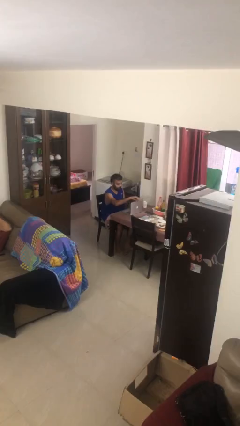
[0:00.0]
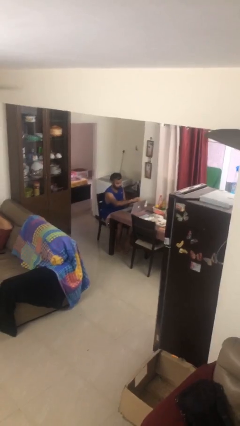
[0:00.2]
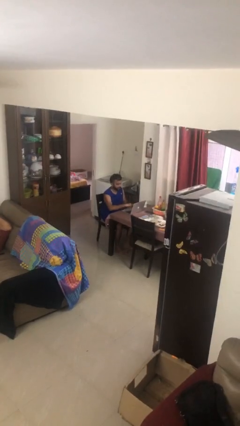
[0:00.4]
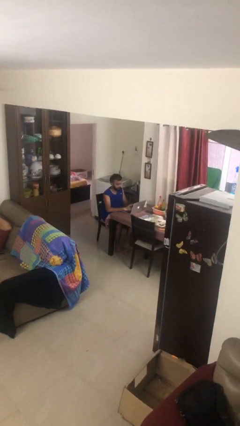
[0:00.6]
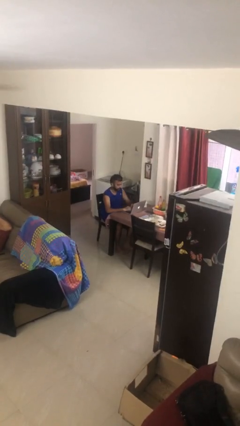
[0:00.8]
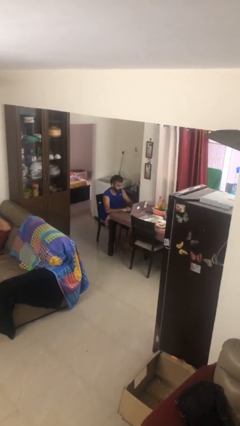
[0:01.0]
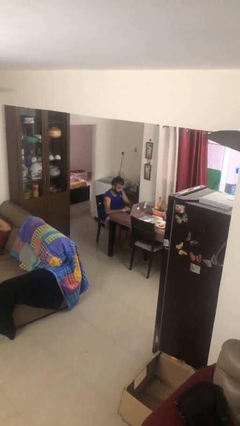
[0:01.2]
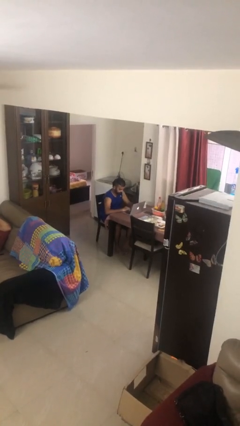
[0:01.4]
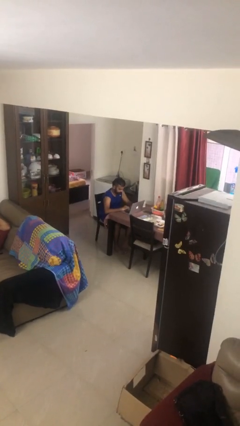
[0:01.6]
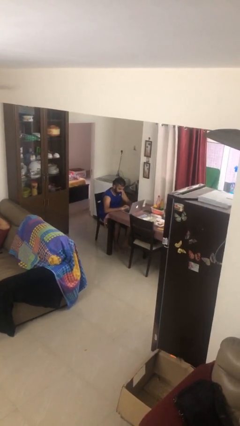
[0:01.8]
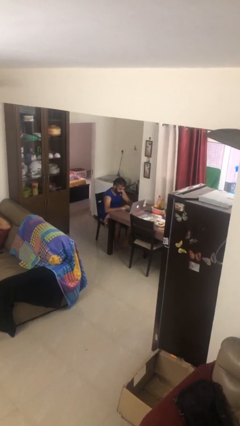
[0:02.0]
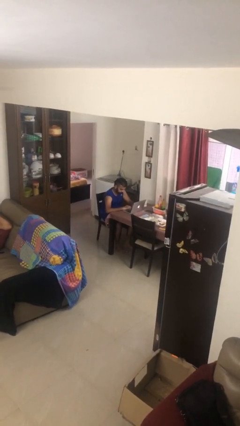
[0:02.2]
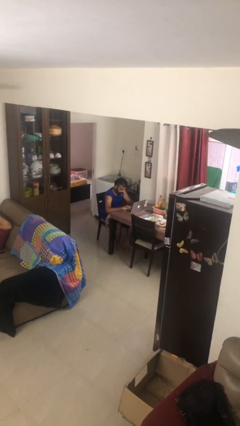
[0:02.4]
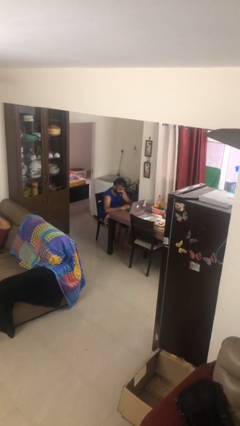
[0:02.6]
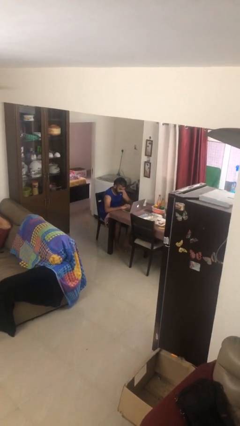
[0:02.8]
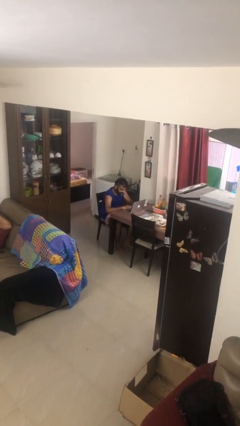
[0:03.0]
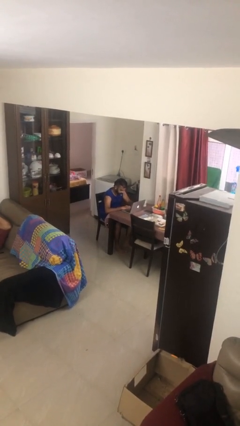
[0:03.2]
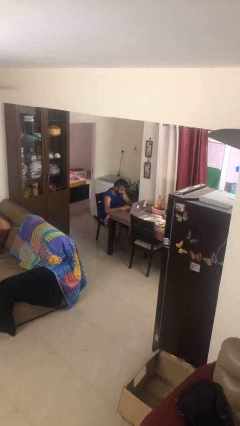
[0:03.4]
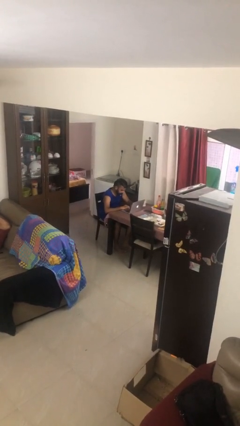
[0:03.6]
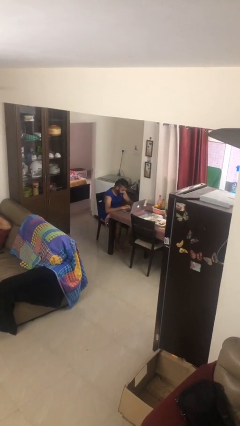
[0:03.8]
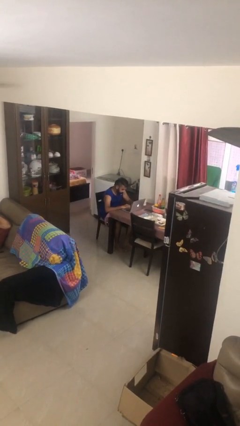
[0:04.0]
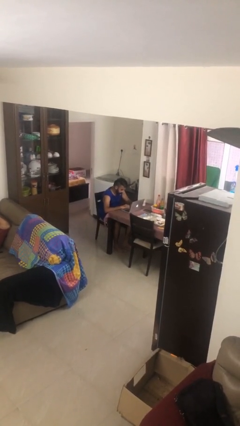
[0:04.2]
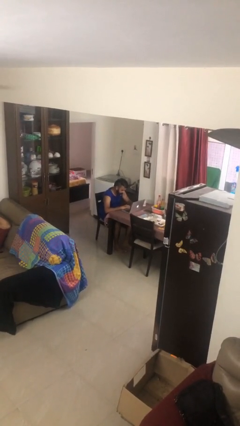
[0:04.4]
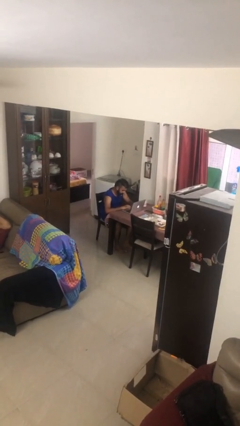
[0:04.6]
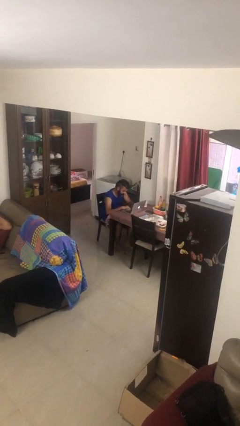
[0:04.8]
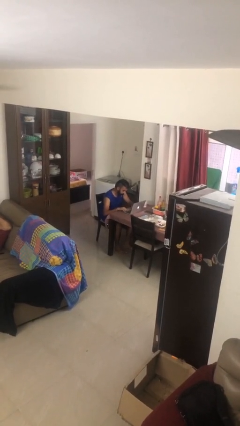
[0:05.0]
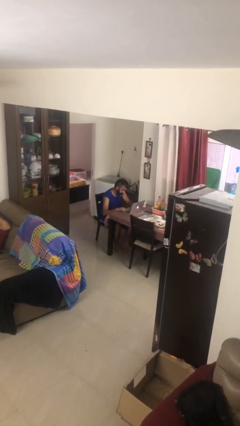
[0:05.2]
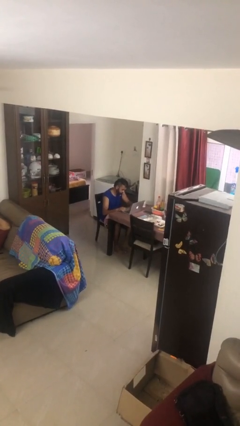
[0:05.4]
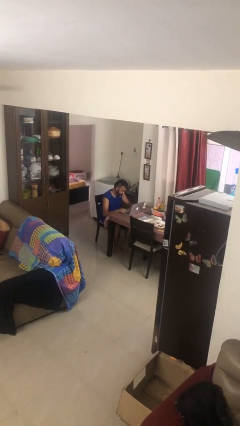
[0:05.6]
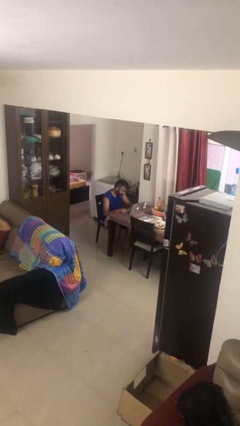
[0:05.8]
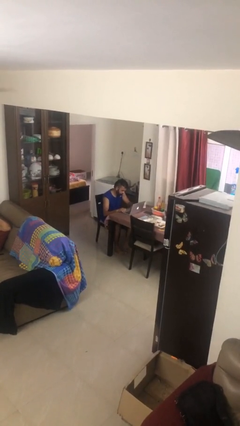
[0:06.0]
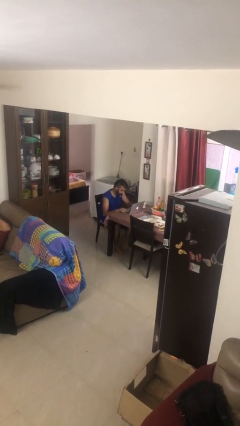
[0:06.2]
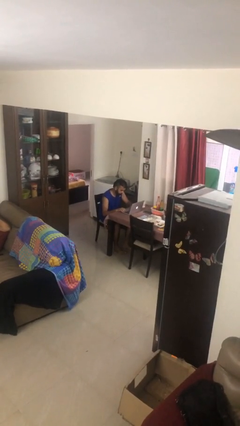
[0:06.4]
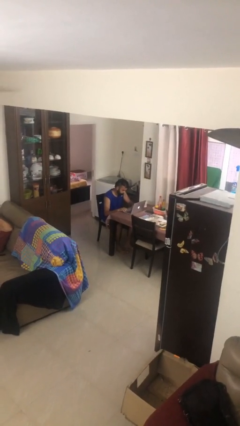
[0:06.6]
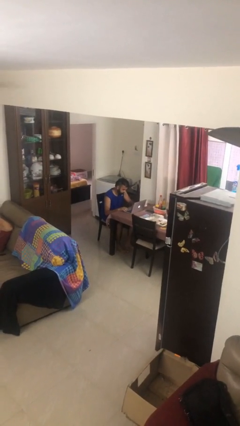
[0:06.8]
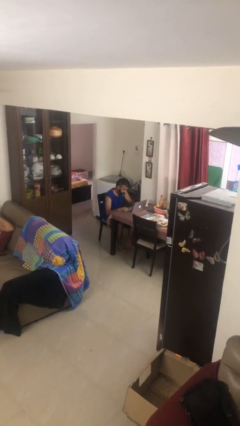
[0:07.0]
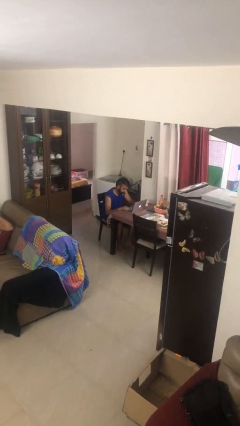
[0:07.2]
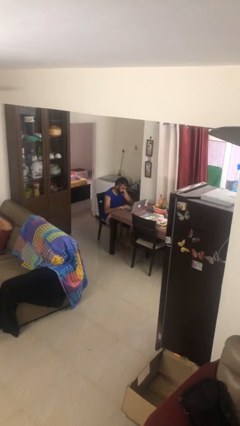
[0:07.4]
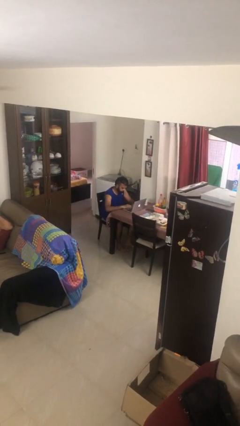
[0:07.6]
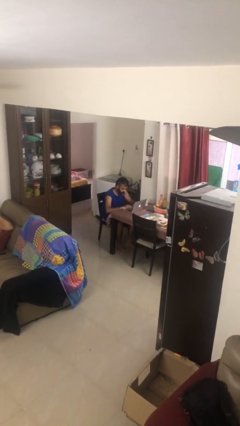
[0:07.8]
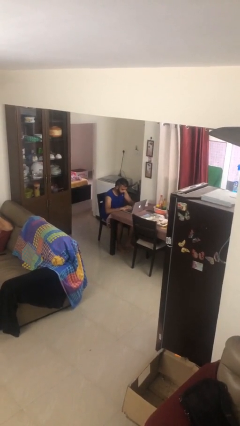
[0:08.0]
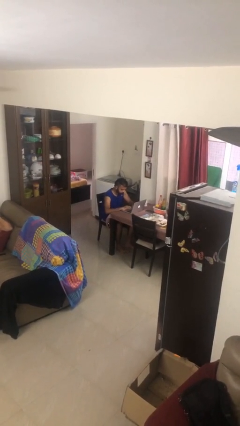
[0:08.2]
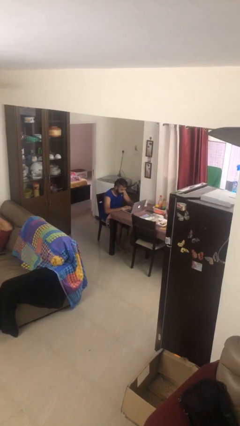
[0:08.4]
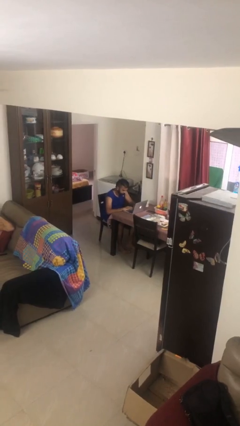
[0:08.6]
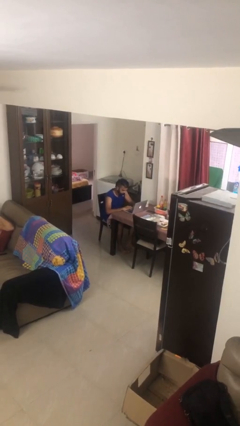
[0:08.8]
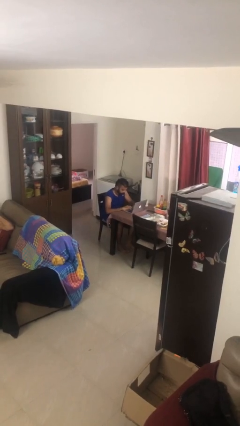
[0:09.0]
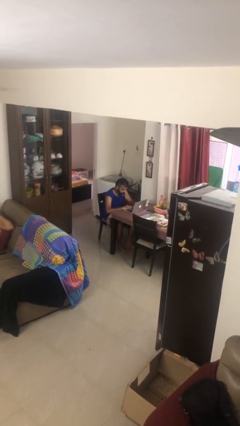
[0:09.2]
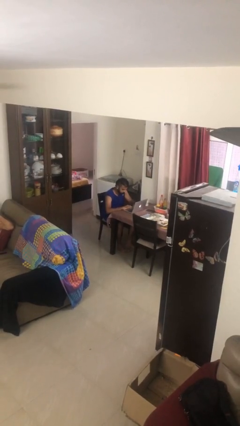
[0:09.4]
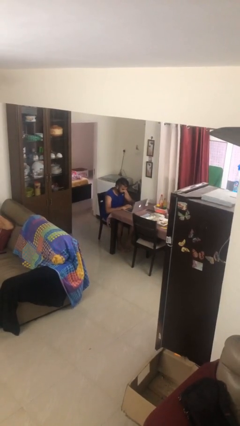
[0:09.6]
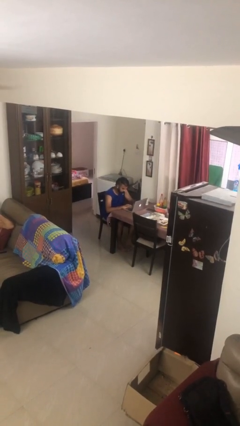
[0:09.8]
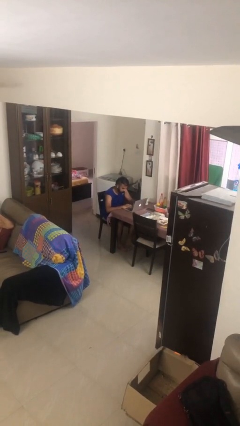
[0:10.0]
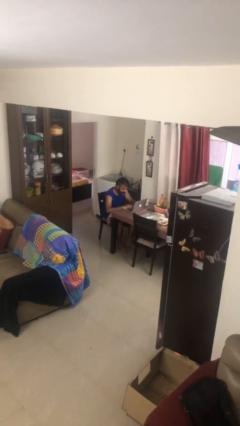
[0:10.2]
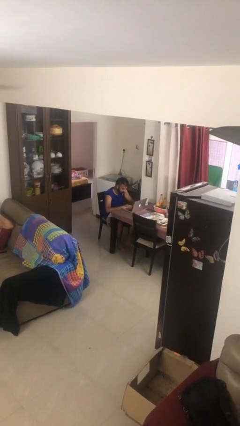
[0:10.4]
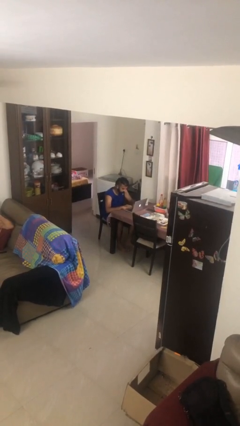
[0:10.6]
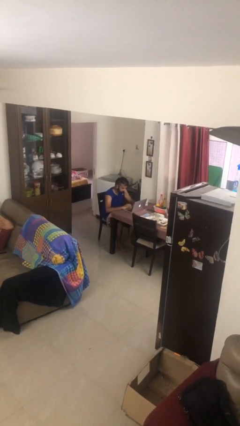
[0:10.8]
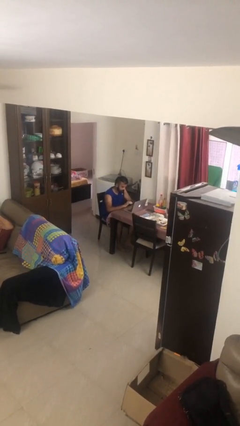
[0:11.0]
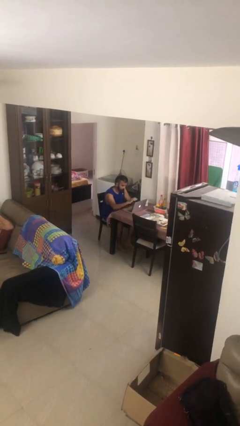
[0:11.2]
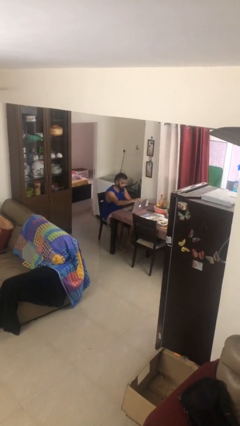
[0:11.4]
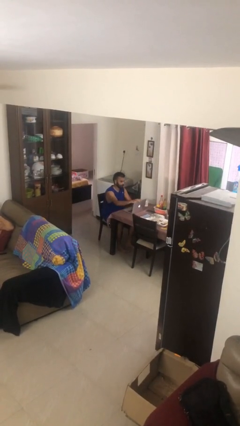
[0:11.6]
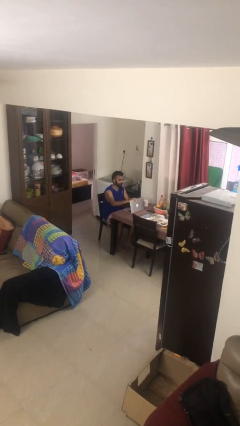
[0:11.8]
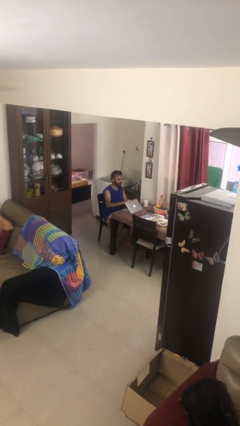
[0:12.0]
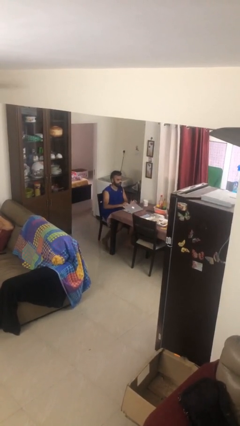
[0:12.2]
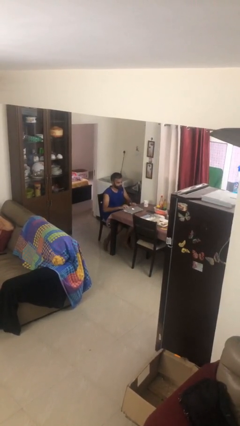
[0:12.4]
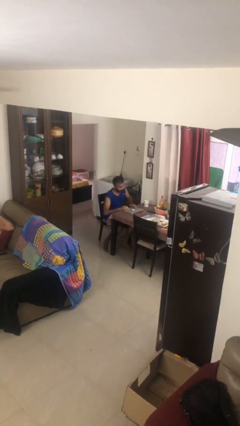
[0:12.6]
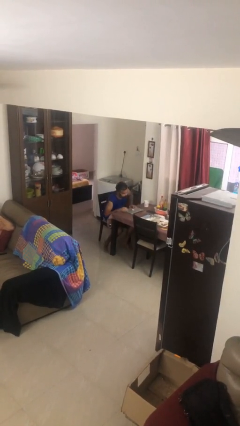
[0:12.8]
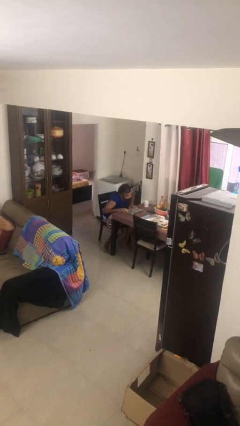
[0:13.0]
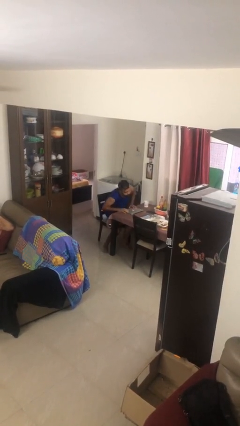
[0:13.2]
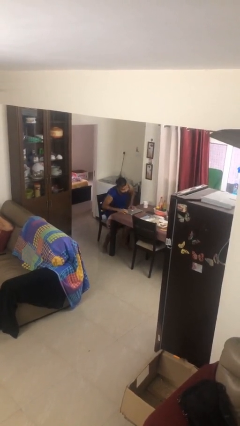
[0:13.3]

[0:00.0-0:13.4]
person interacts with laptop

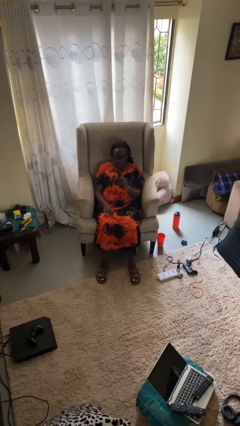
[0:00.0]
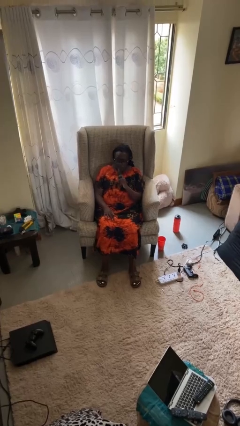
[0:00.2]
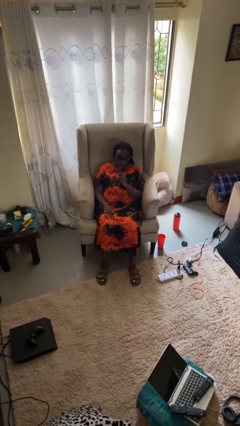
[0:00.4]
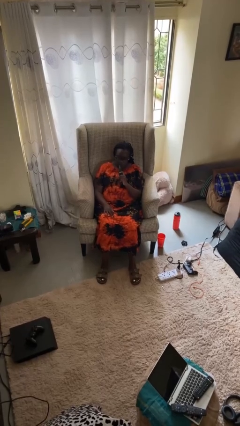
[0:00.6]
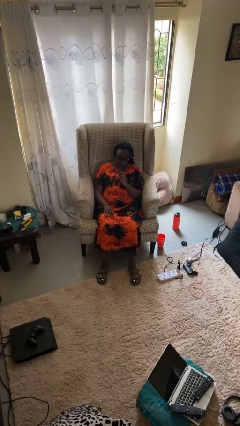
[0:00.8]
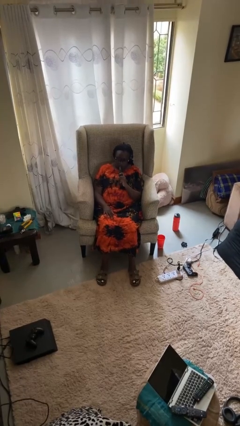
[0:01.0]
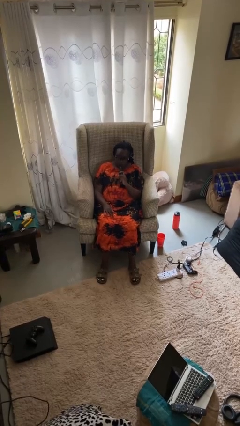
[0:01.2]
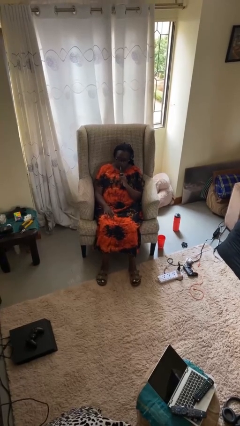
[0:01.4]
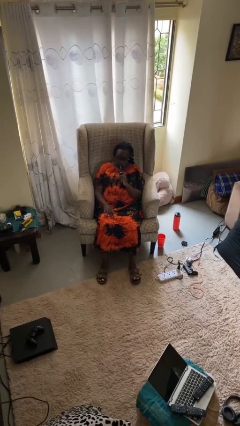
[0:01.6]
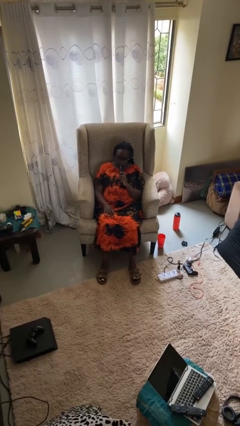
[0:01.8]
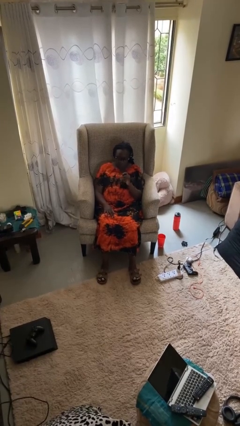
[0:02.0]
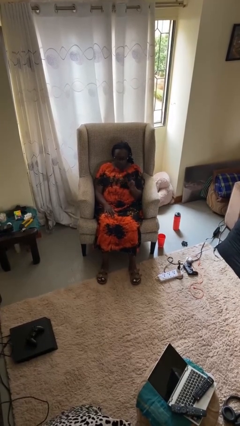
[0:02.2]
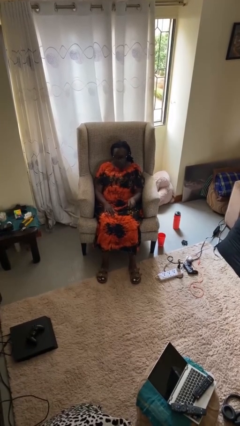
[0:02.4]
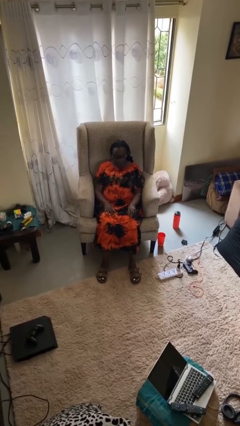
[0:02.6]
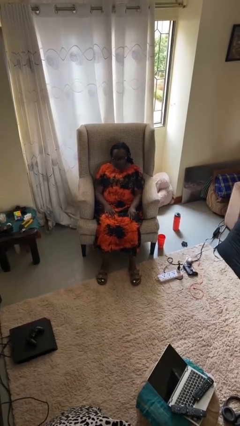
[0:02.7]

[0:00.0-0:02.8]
person vapes

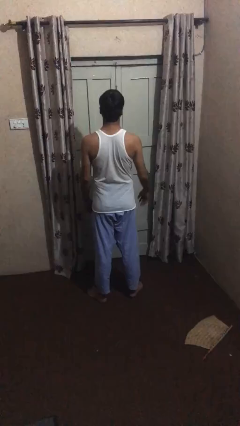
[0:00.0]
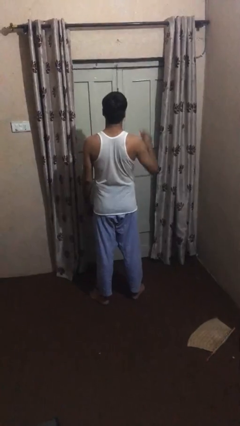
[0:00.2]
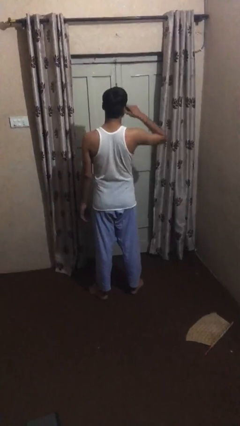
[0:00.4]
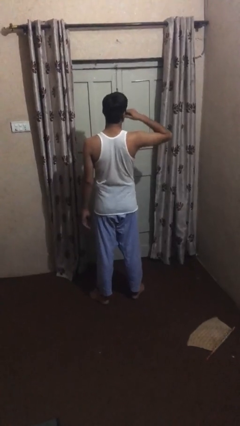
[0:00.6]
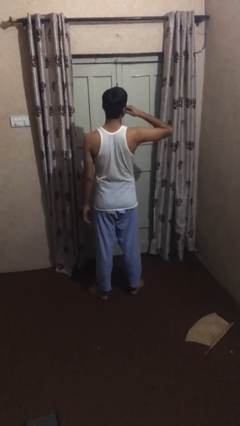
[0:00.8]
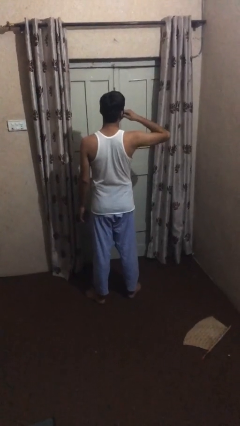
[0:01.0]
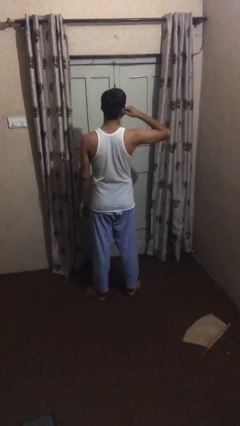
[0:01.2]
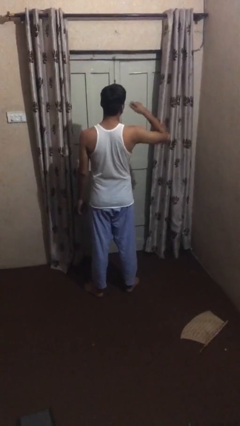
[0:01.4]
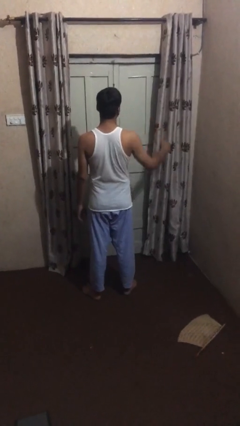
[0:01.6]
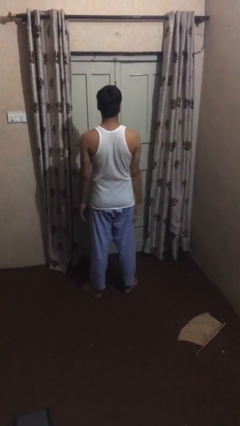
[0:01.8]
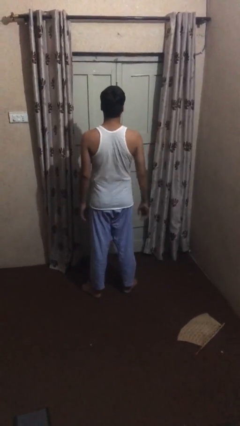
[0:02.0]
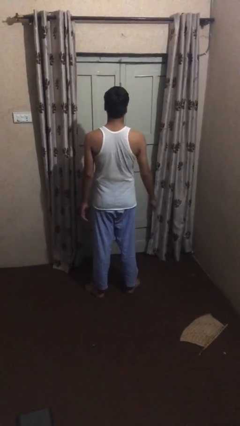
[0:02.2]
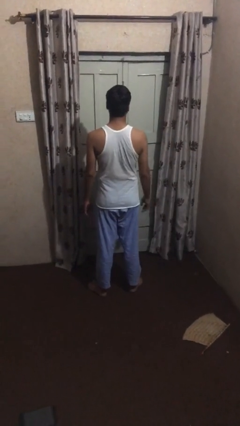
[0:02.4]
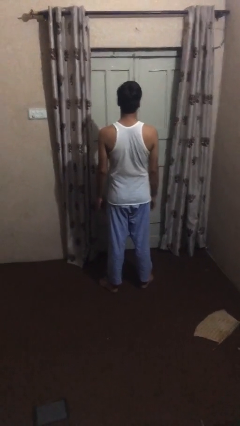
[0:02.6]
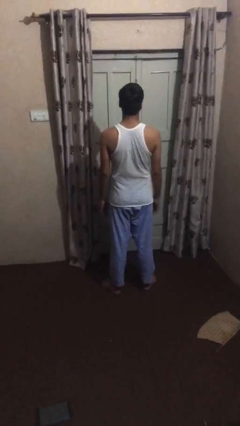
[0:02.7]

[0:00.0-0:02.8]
person scratches face
